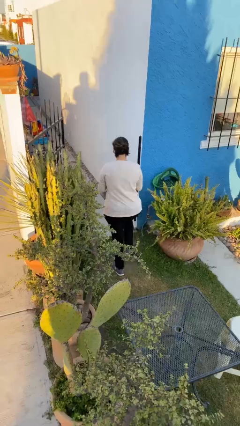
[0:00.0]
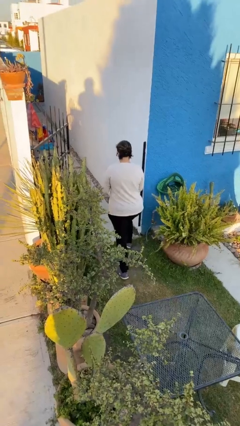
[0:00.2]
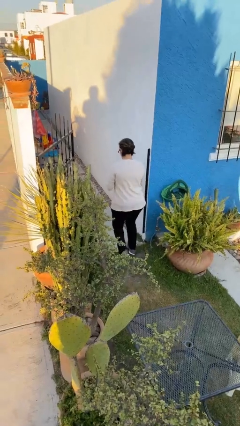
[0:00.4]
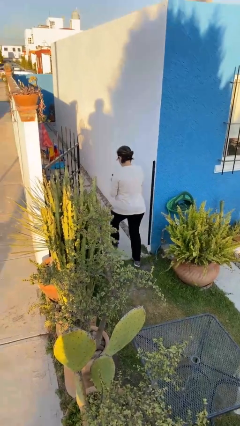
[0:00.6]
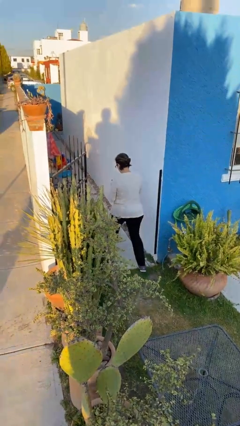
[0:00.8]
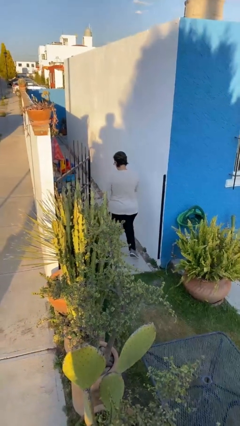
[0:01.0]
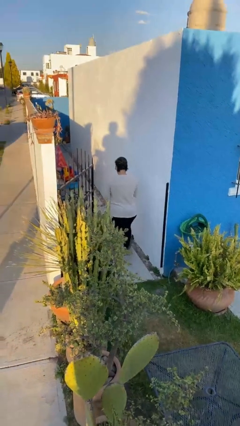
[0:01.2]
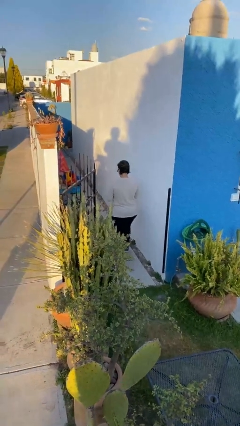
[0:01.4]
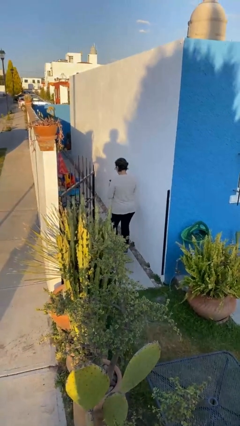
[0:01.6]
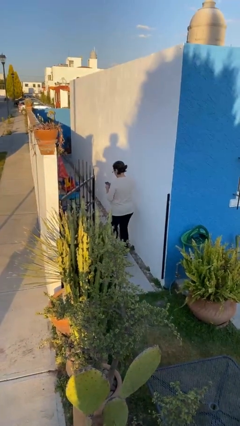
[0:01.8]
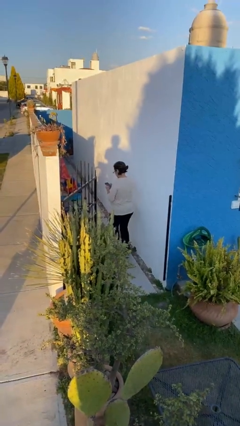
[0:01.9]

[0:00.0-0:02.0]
person exits scene through structure

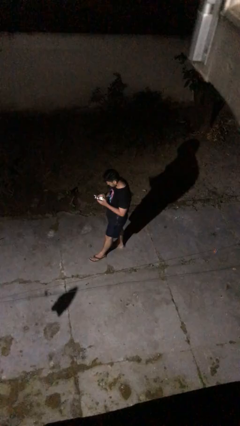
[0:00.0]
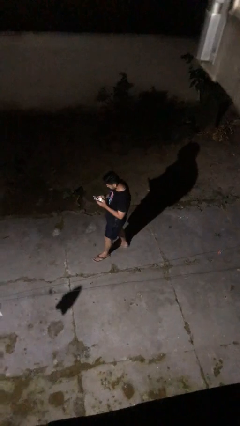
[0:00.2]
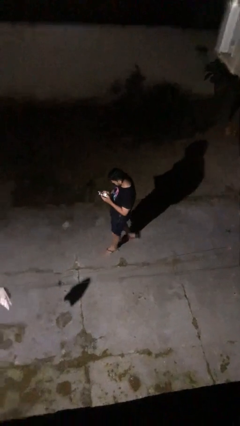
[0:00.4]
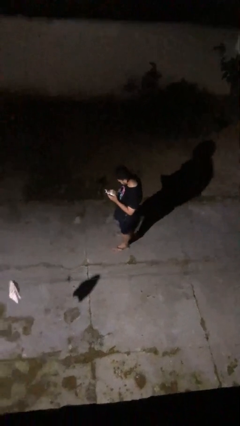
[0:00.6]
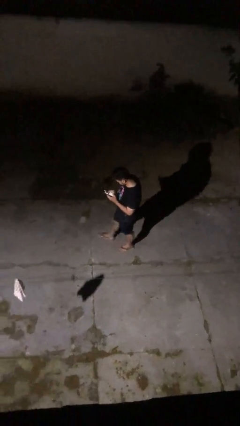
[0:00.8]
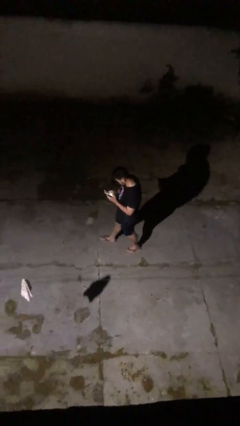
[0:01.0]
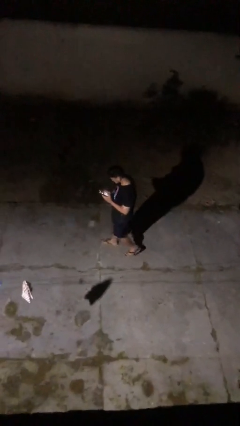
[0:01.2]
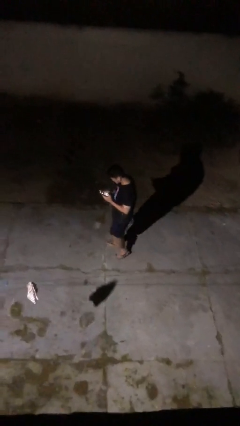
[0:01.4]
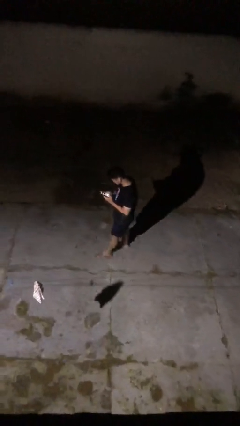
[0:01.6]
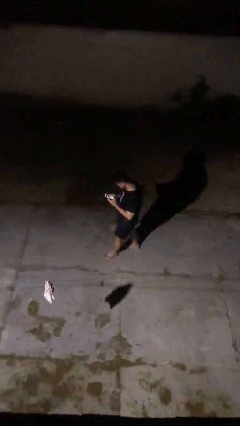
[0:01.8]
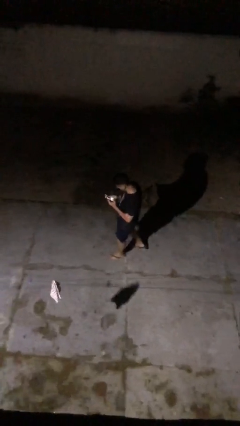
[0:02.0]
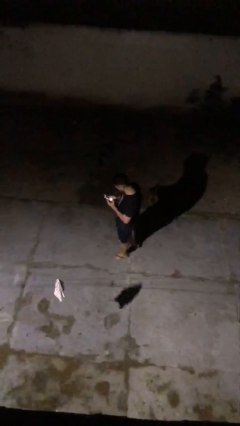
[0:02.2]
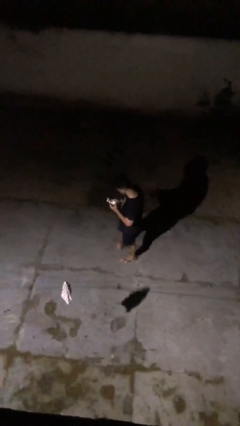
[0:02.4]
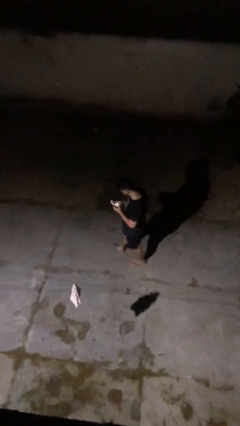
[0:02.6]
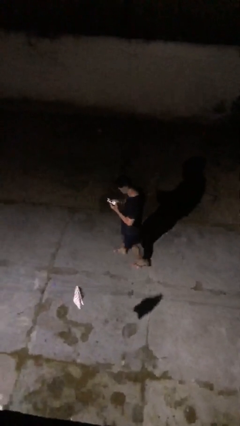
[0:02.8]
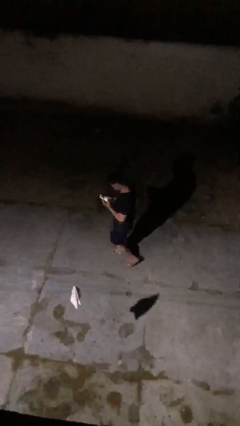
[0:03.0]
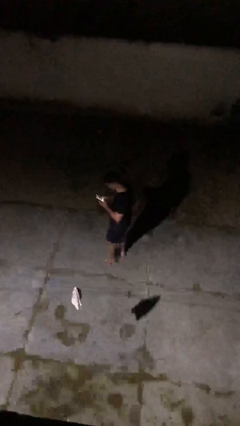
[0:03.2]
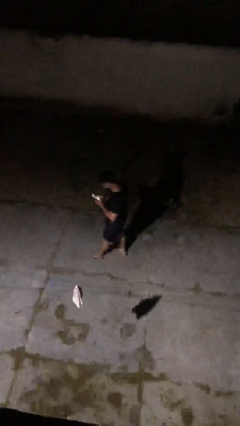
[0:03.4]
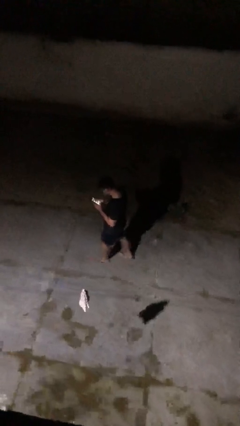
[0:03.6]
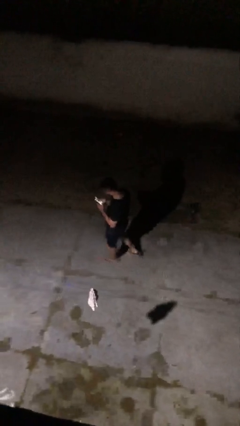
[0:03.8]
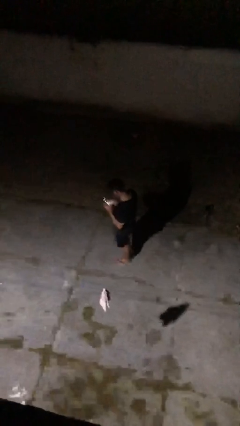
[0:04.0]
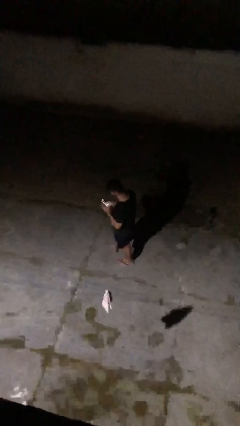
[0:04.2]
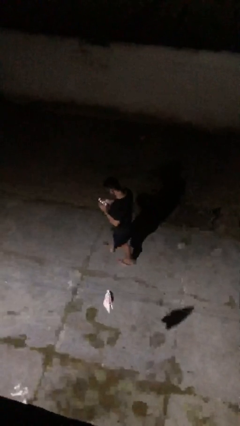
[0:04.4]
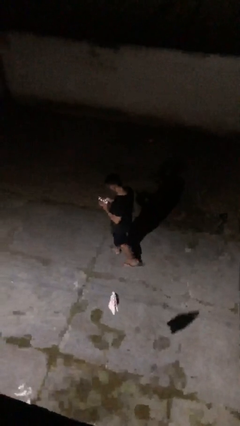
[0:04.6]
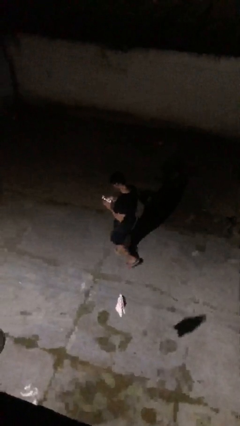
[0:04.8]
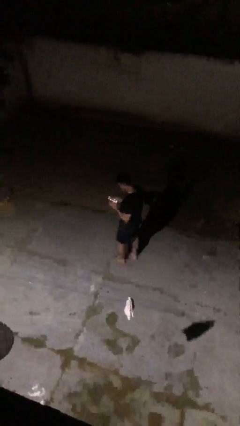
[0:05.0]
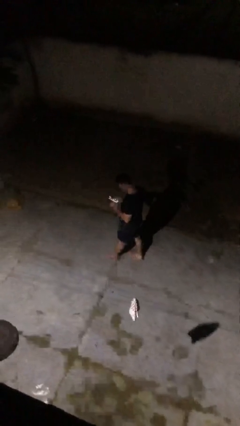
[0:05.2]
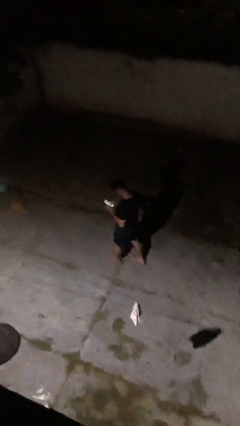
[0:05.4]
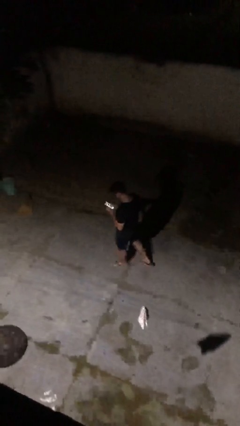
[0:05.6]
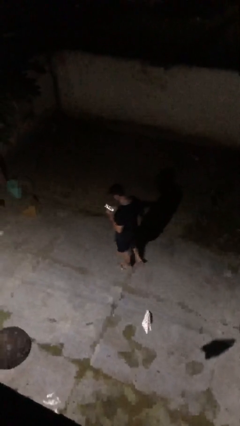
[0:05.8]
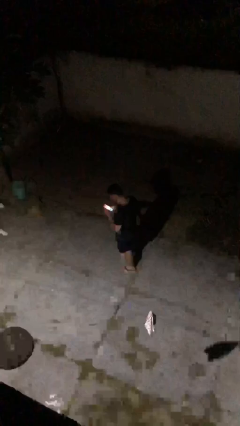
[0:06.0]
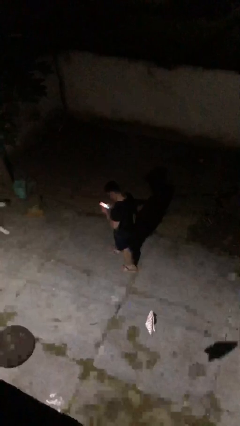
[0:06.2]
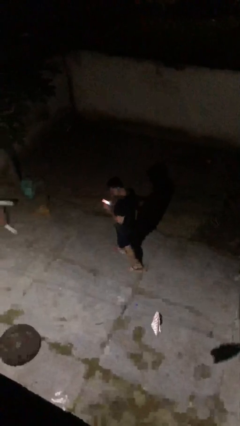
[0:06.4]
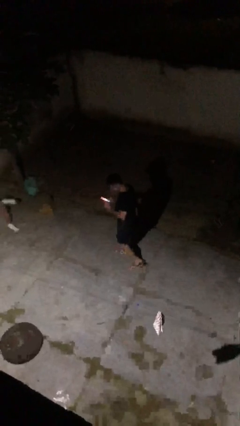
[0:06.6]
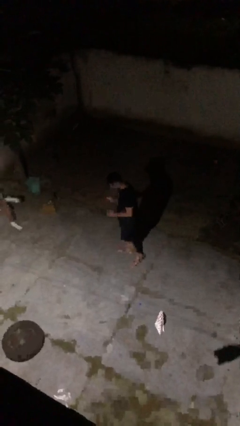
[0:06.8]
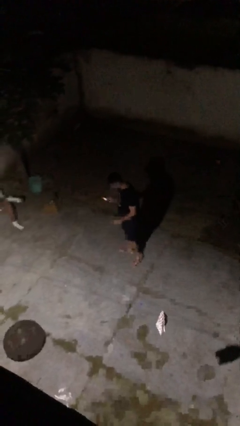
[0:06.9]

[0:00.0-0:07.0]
person texts on phone

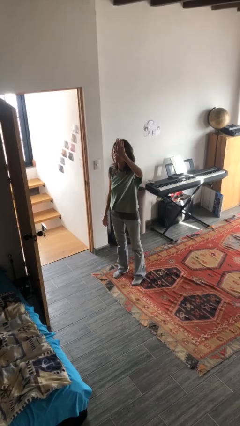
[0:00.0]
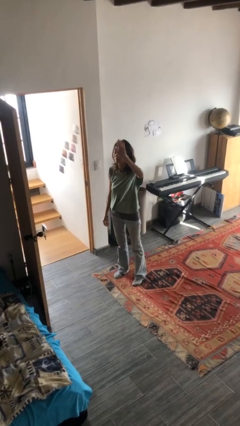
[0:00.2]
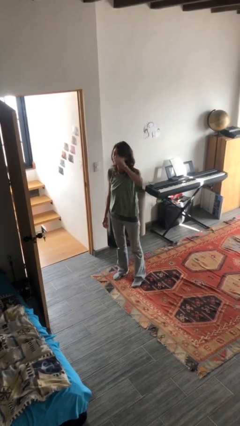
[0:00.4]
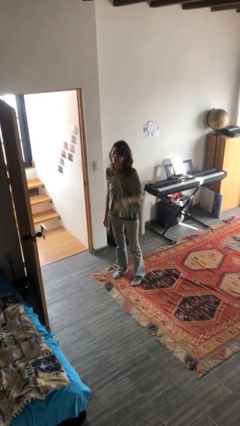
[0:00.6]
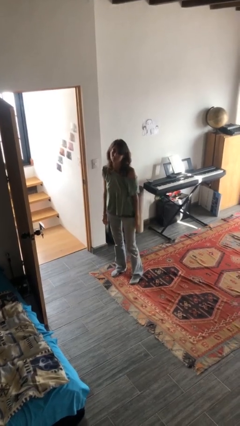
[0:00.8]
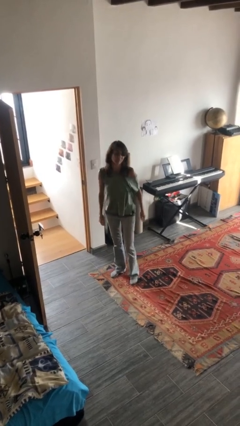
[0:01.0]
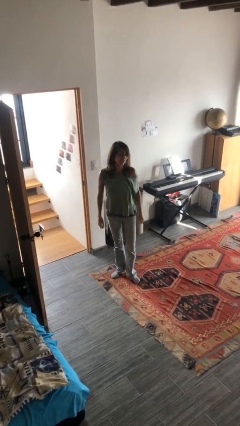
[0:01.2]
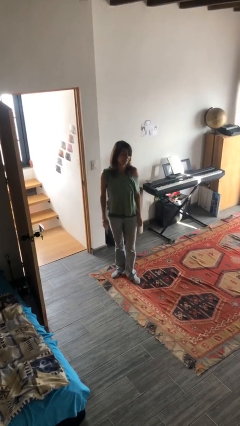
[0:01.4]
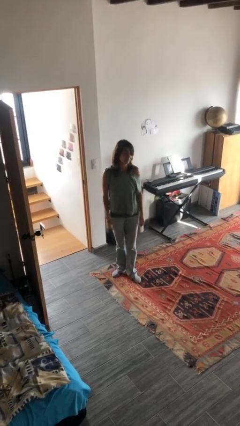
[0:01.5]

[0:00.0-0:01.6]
person gestures lower hand

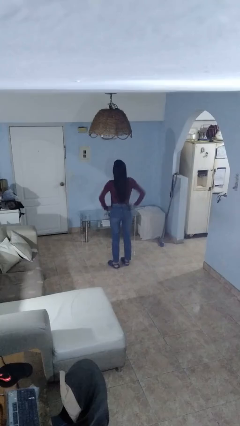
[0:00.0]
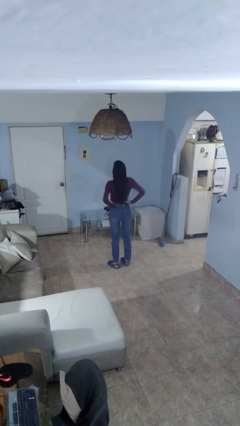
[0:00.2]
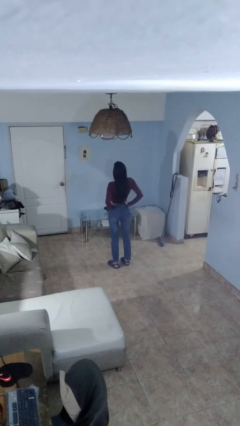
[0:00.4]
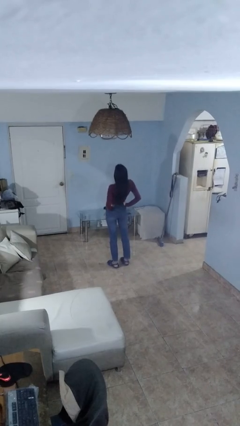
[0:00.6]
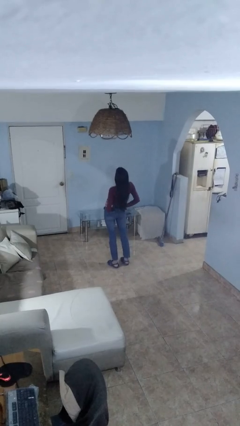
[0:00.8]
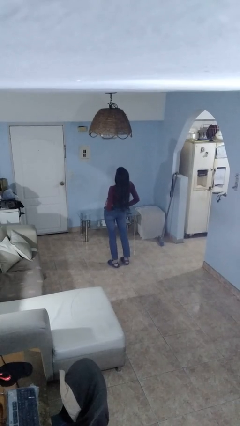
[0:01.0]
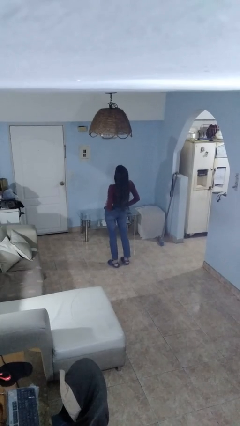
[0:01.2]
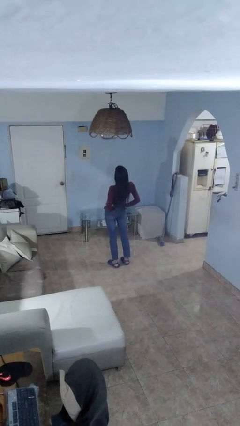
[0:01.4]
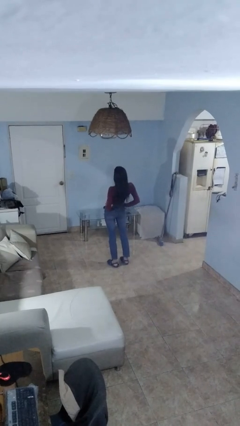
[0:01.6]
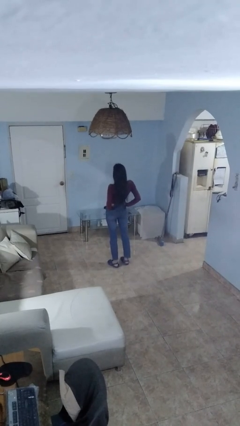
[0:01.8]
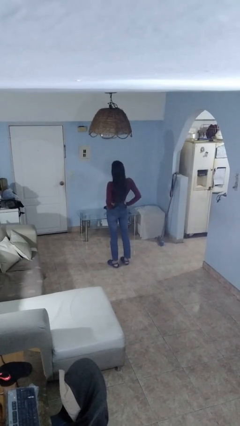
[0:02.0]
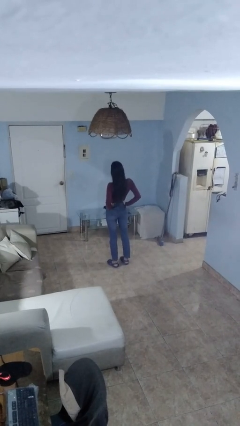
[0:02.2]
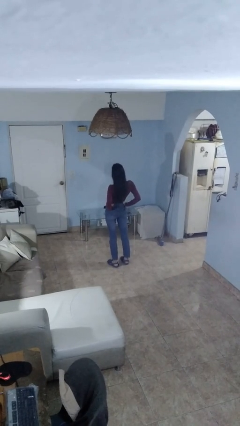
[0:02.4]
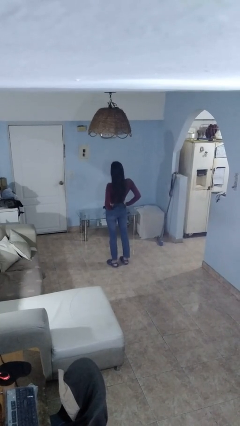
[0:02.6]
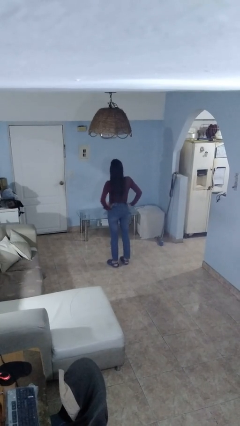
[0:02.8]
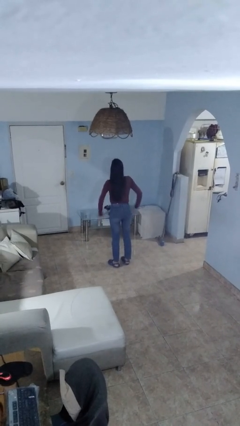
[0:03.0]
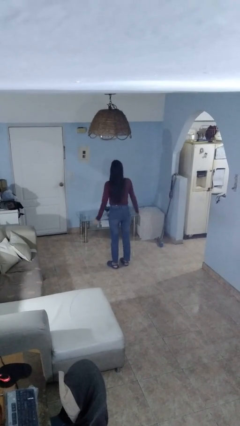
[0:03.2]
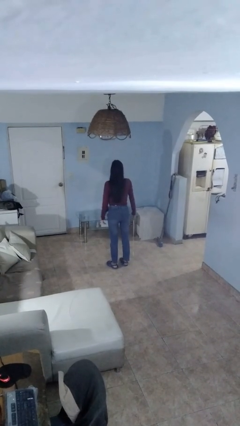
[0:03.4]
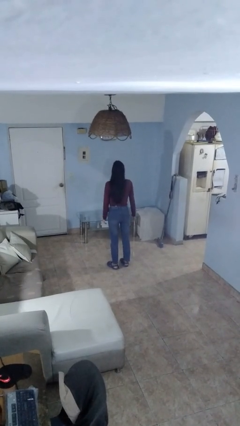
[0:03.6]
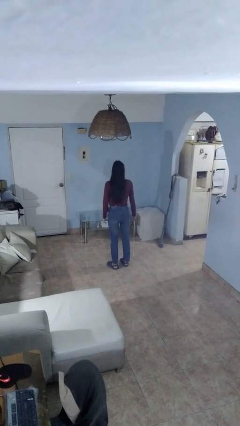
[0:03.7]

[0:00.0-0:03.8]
person stretches back

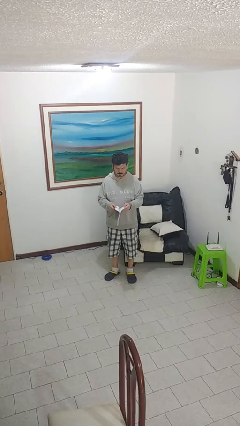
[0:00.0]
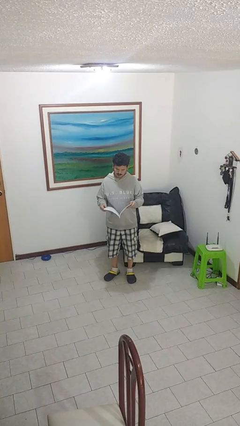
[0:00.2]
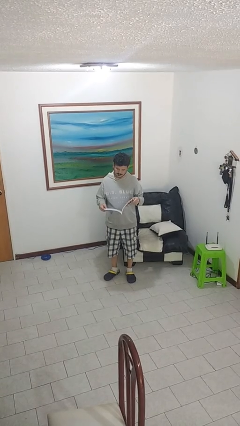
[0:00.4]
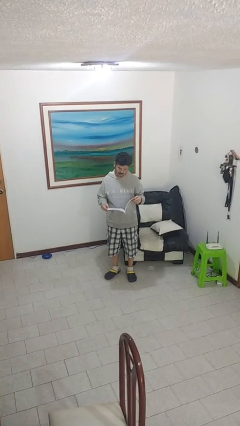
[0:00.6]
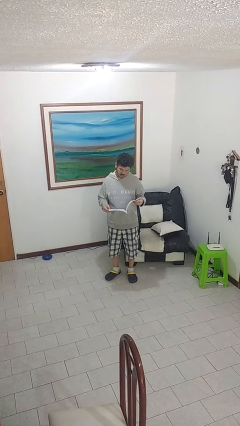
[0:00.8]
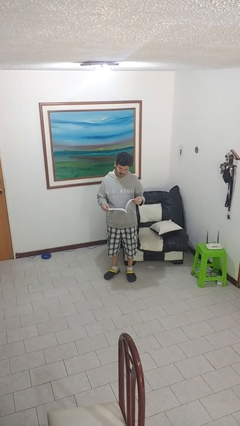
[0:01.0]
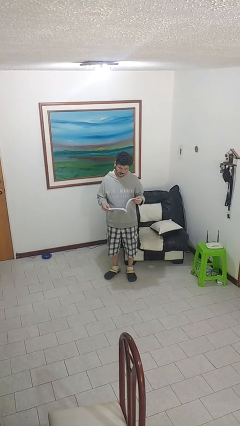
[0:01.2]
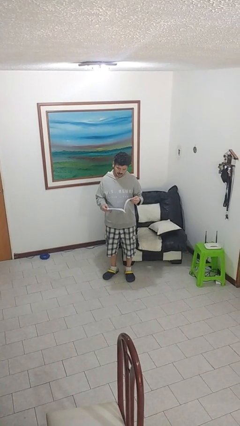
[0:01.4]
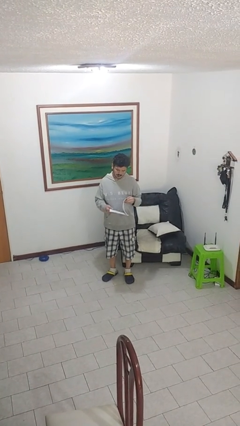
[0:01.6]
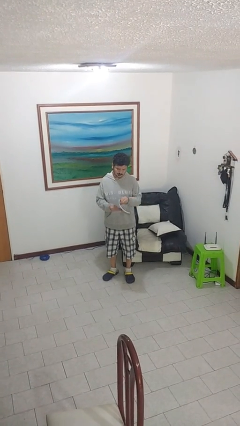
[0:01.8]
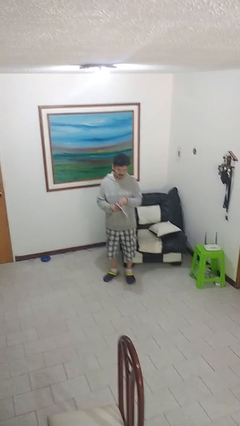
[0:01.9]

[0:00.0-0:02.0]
person reads magazine

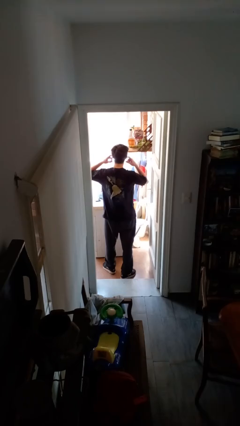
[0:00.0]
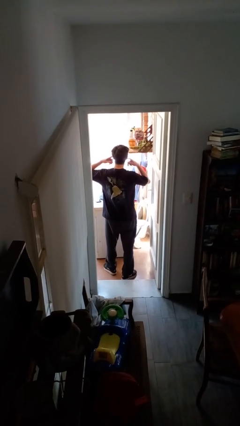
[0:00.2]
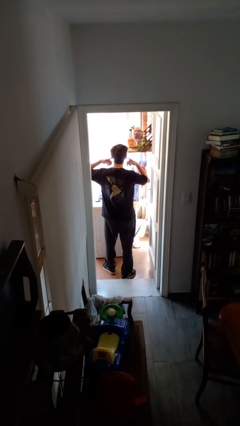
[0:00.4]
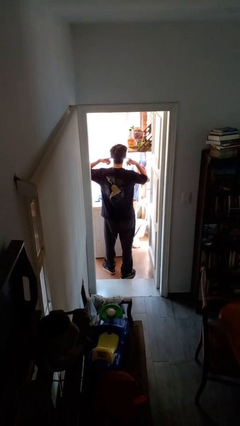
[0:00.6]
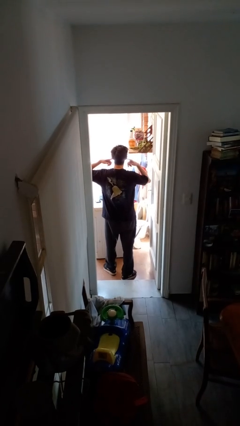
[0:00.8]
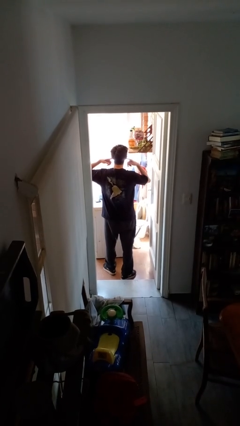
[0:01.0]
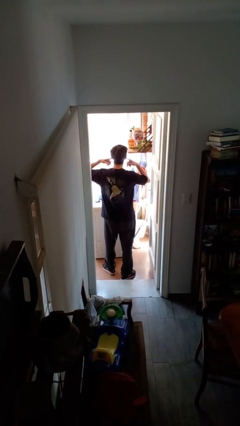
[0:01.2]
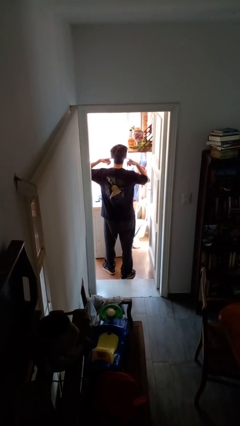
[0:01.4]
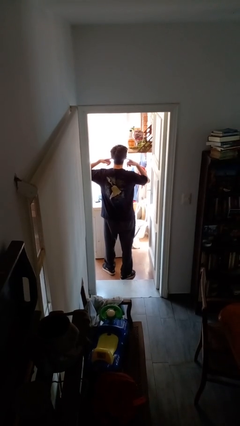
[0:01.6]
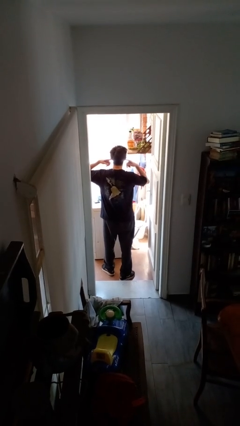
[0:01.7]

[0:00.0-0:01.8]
person puts fingers in ear
